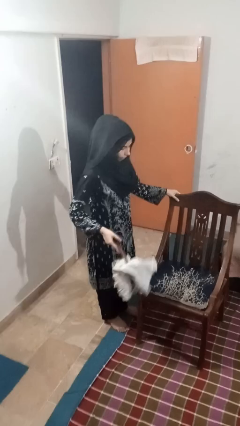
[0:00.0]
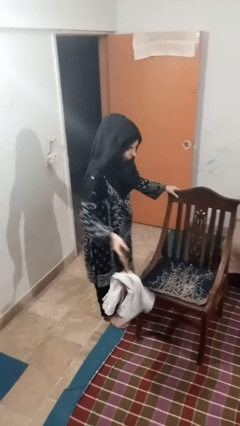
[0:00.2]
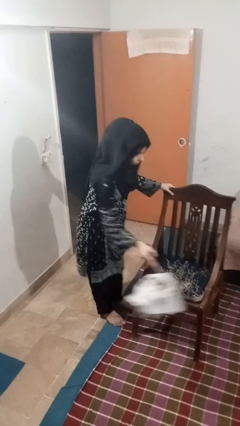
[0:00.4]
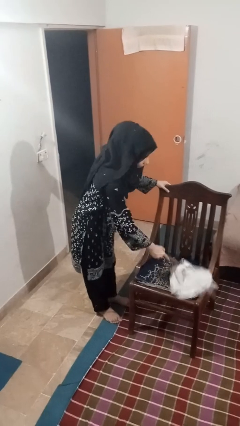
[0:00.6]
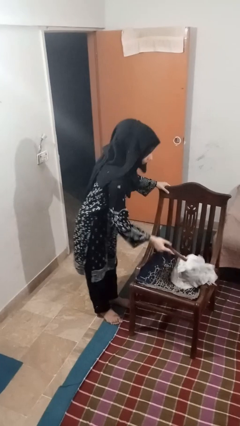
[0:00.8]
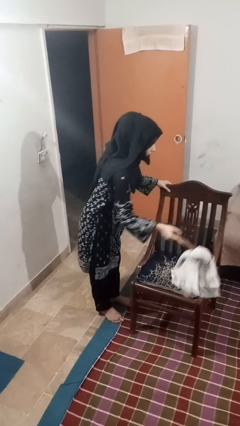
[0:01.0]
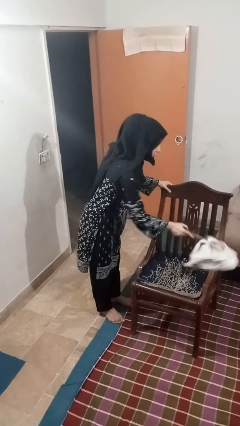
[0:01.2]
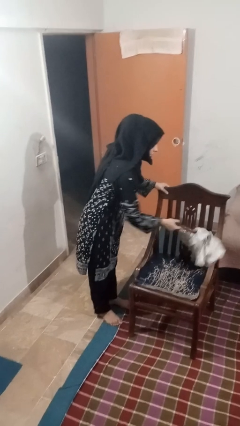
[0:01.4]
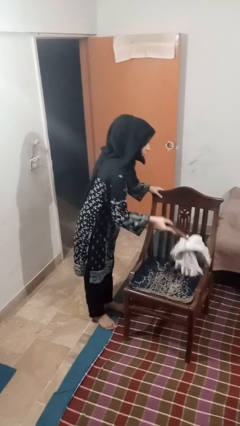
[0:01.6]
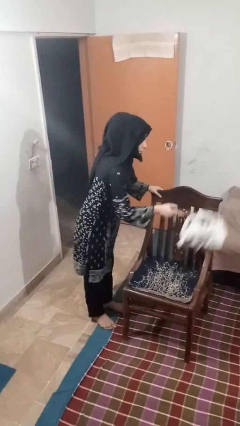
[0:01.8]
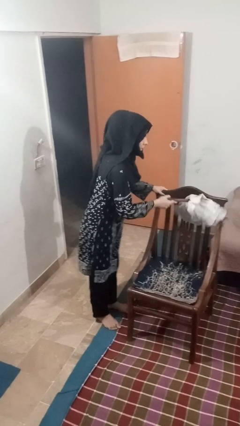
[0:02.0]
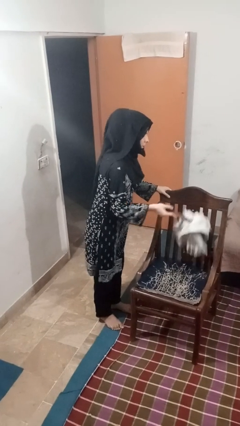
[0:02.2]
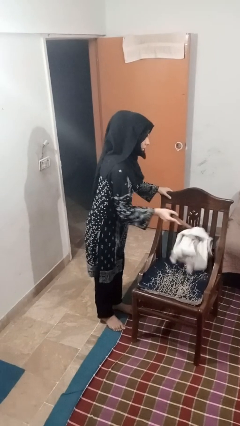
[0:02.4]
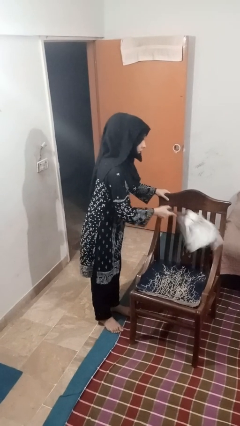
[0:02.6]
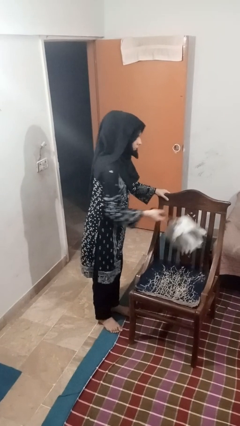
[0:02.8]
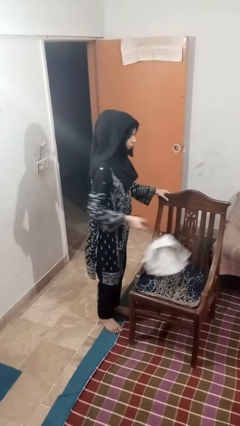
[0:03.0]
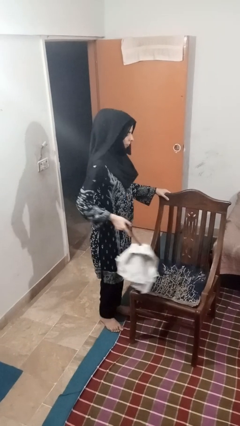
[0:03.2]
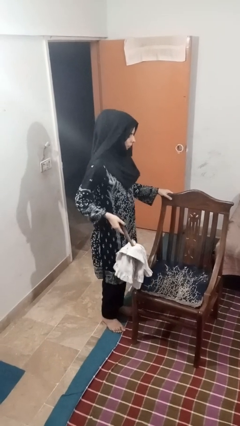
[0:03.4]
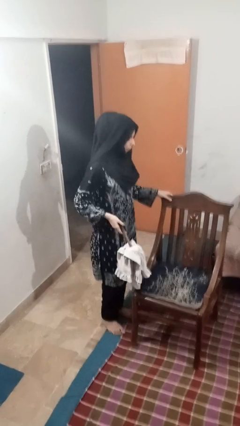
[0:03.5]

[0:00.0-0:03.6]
person dusts furniture

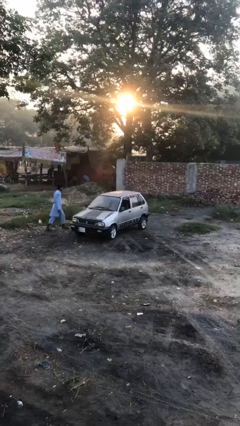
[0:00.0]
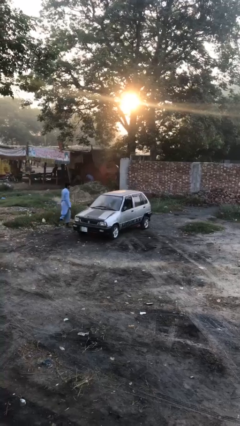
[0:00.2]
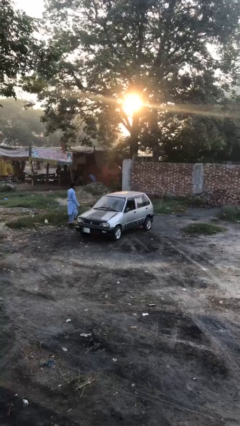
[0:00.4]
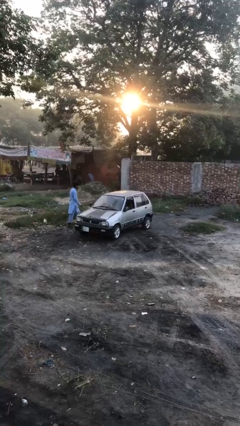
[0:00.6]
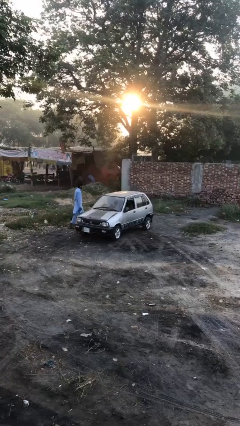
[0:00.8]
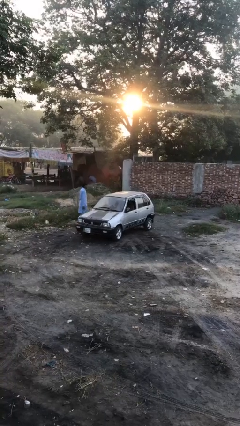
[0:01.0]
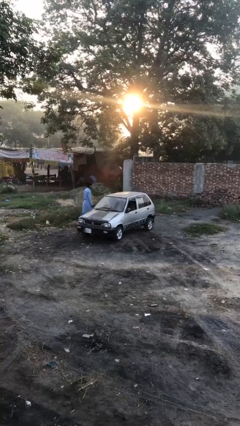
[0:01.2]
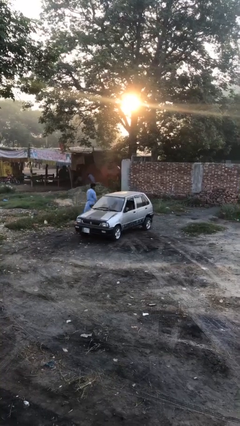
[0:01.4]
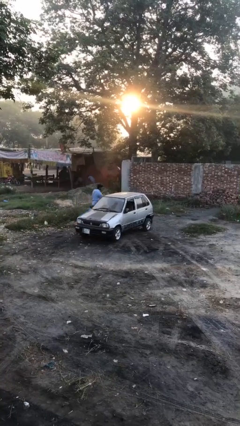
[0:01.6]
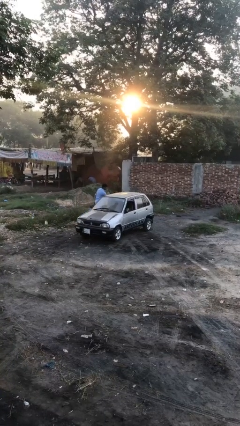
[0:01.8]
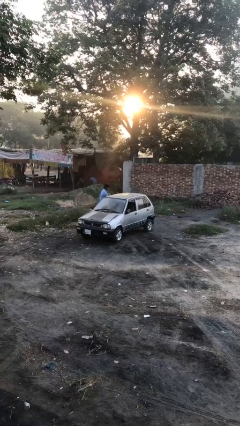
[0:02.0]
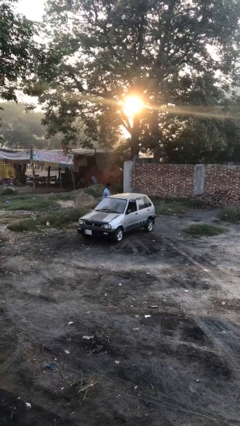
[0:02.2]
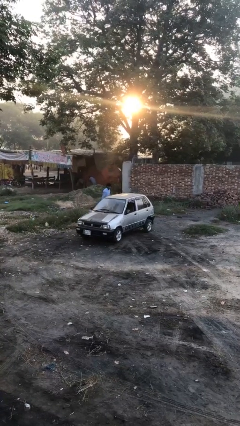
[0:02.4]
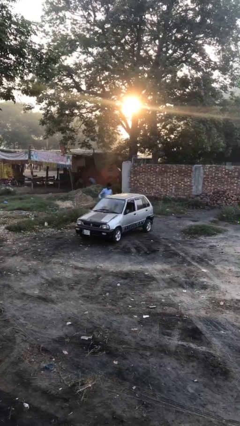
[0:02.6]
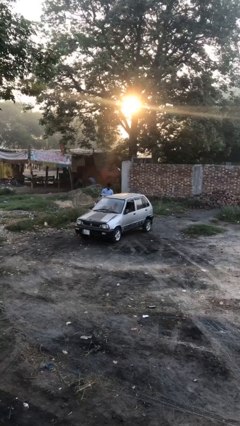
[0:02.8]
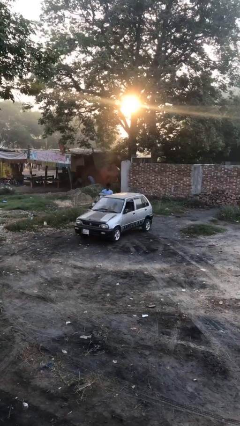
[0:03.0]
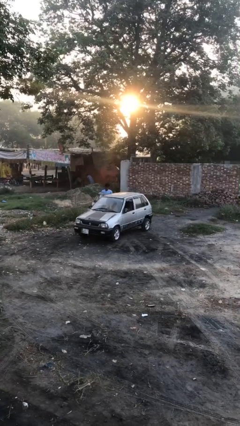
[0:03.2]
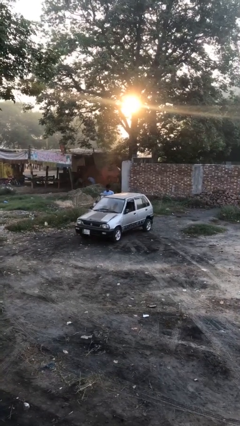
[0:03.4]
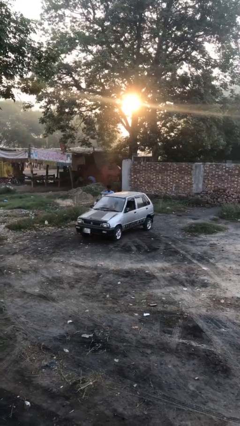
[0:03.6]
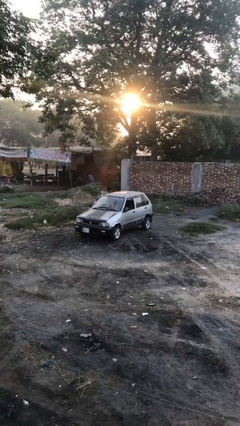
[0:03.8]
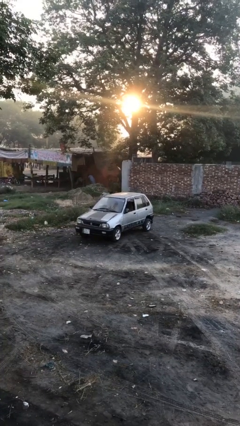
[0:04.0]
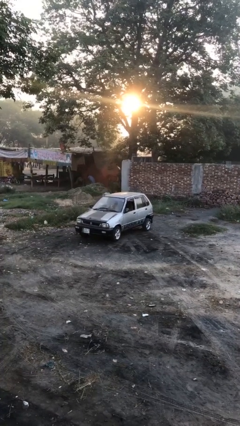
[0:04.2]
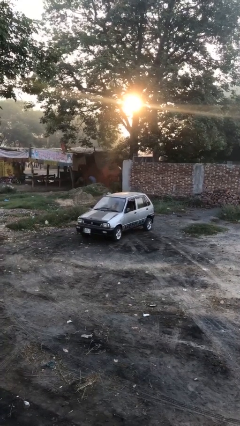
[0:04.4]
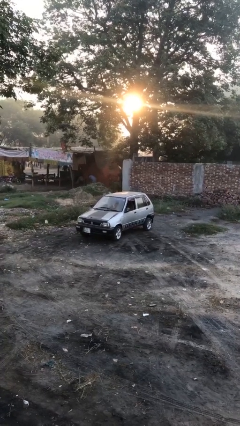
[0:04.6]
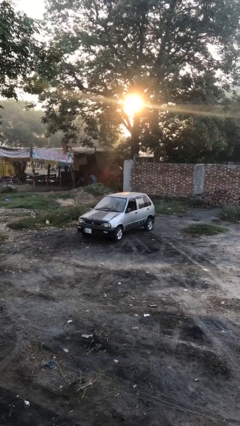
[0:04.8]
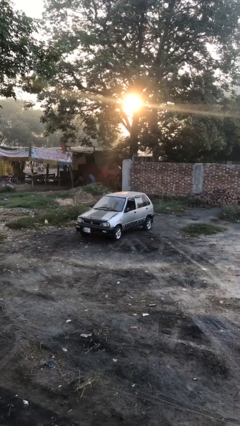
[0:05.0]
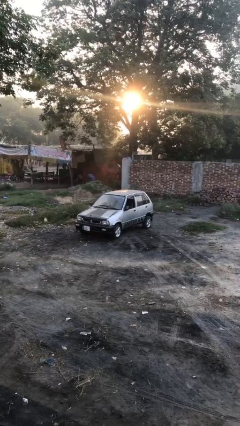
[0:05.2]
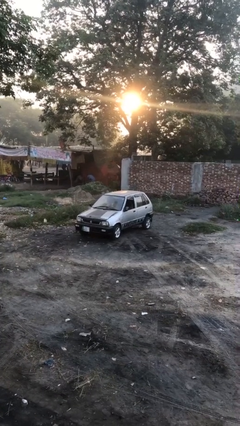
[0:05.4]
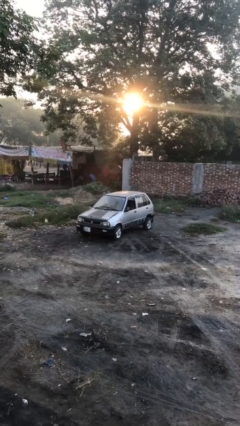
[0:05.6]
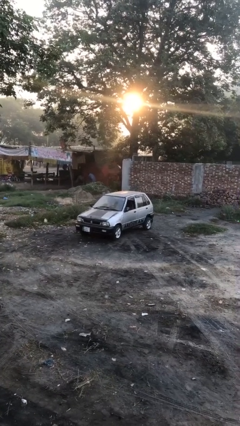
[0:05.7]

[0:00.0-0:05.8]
car picks up person

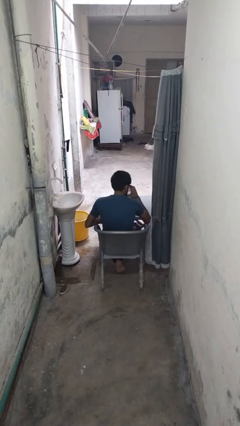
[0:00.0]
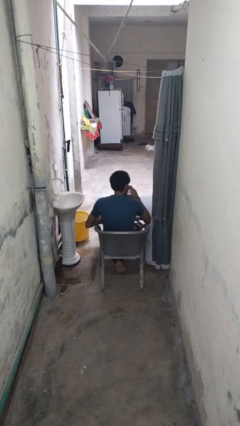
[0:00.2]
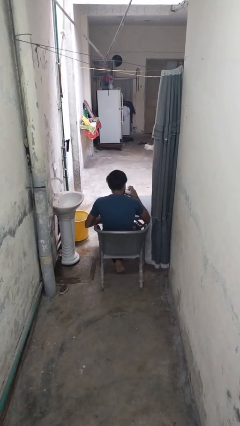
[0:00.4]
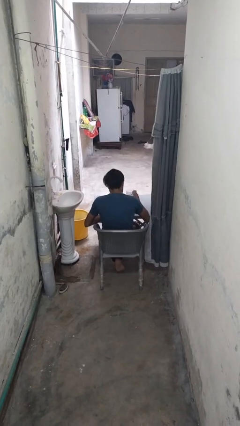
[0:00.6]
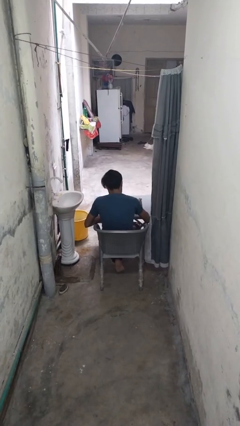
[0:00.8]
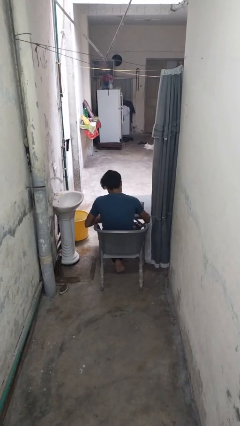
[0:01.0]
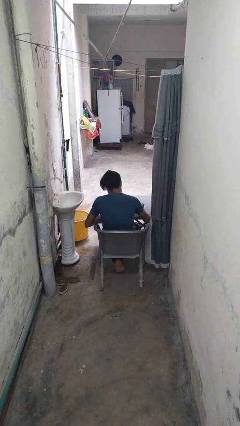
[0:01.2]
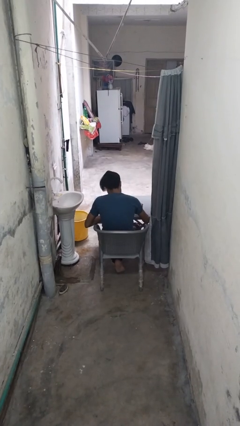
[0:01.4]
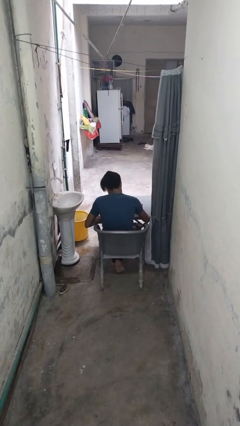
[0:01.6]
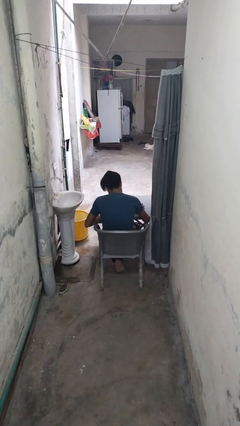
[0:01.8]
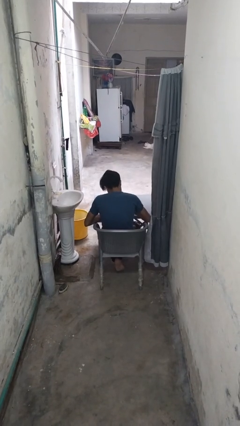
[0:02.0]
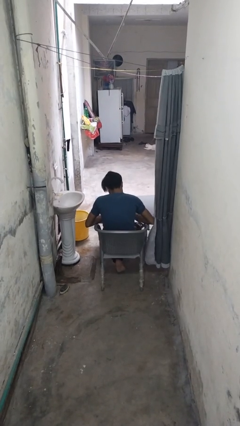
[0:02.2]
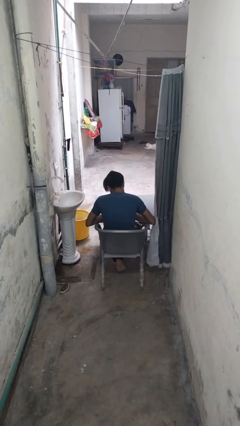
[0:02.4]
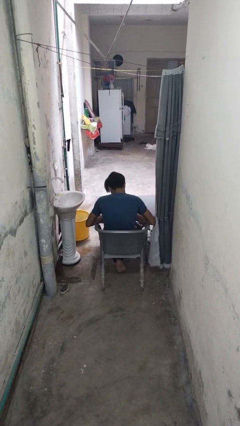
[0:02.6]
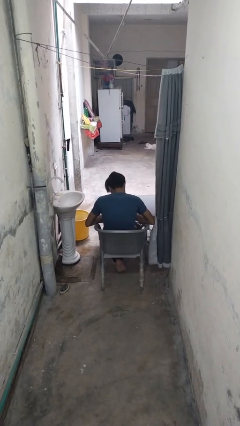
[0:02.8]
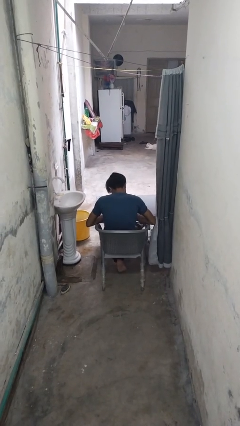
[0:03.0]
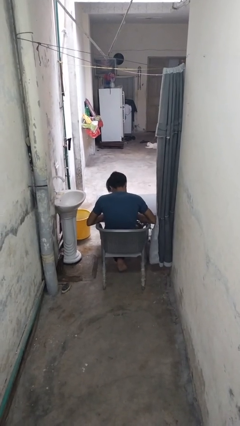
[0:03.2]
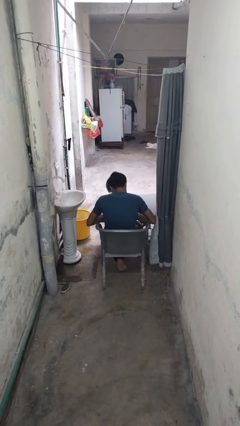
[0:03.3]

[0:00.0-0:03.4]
person puts down object on table

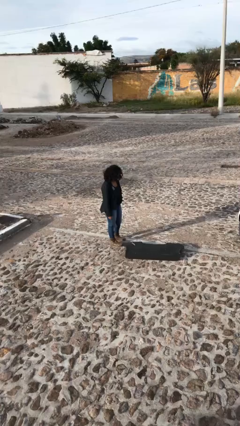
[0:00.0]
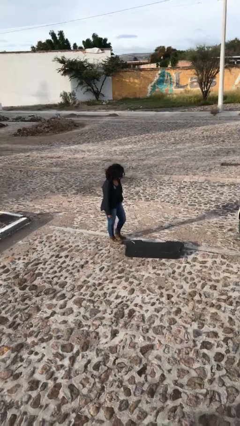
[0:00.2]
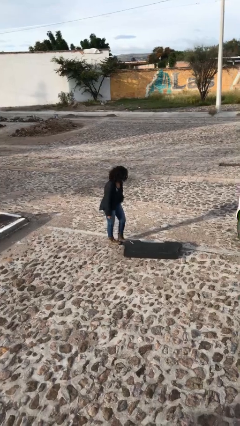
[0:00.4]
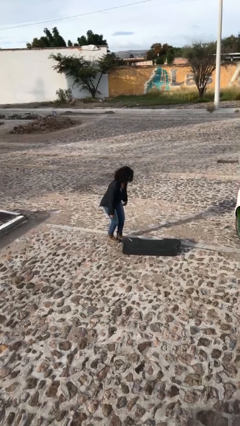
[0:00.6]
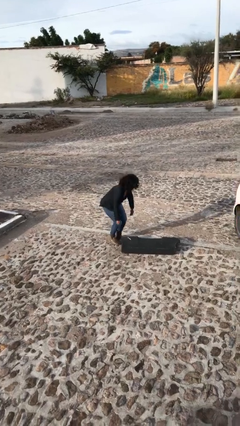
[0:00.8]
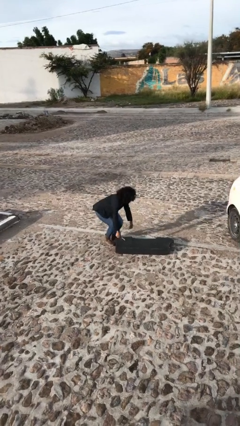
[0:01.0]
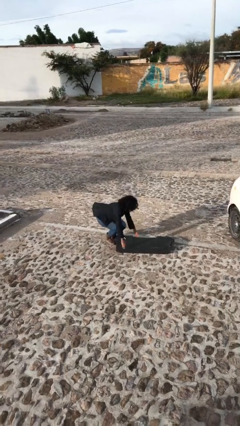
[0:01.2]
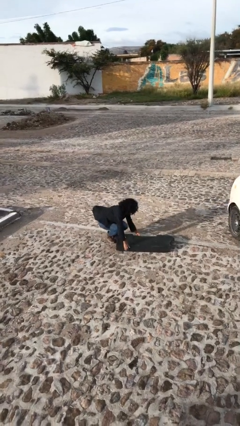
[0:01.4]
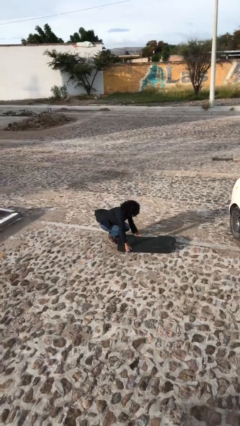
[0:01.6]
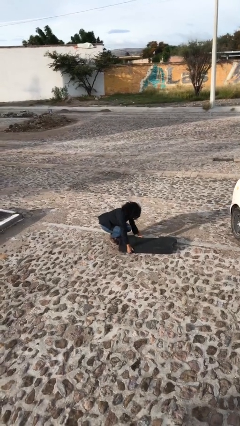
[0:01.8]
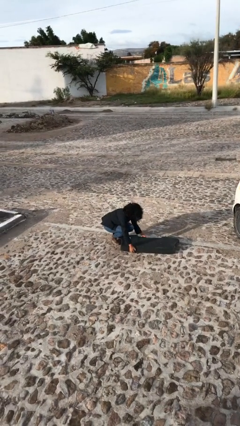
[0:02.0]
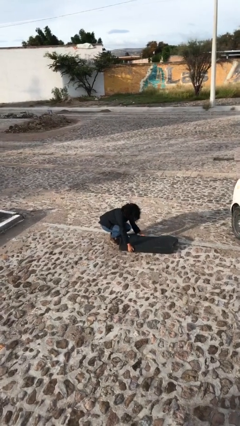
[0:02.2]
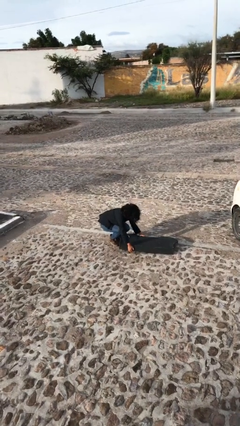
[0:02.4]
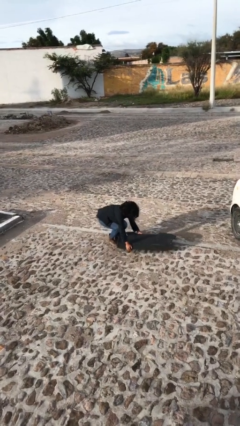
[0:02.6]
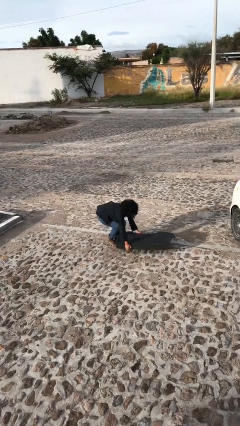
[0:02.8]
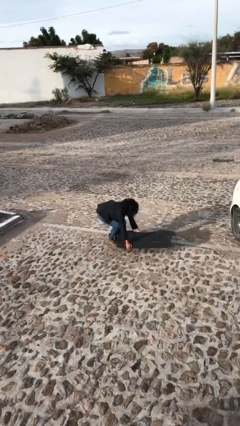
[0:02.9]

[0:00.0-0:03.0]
person picks up object from floor

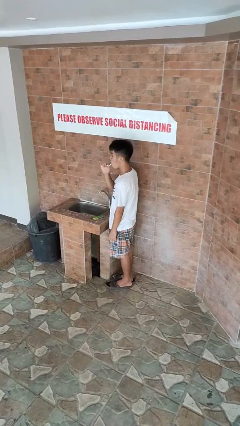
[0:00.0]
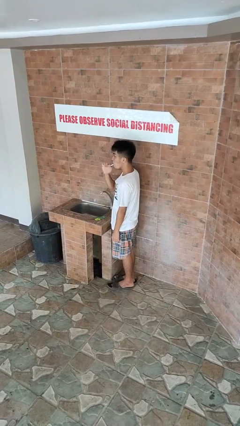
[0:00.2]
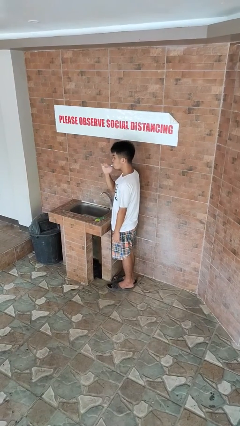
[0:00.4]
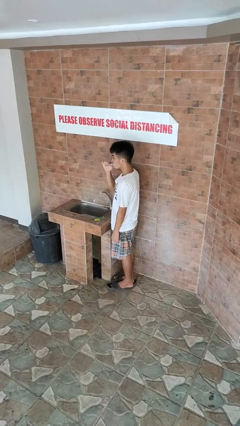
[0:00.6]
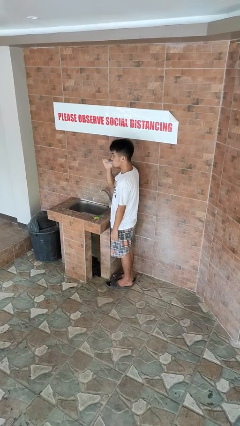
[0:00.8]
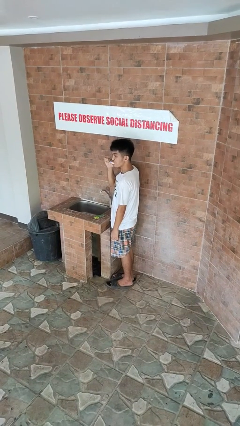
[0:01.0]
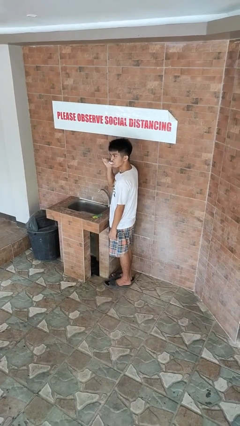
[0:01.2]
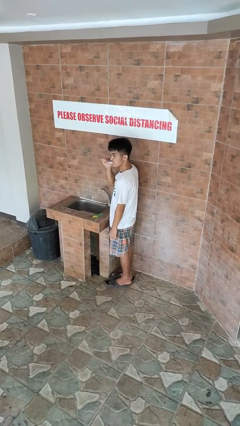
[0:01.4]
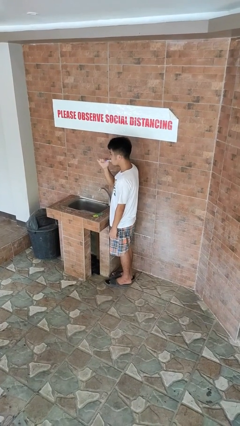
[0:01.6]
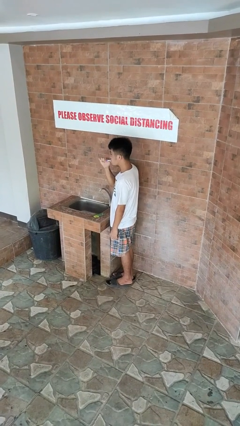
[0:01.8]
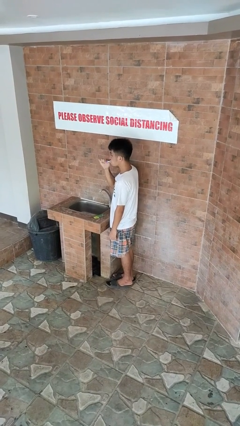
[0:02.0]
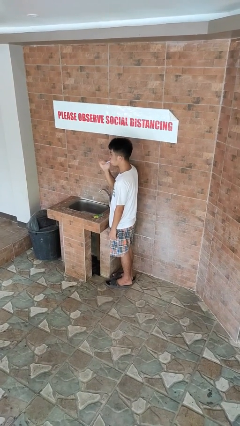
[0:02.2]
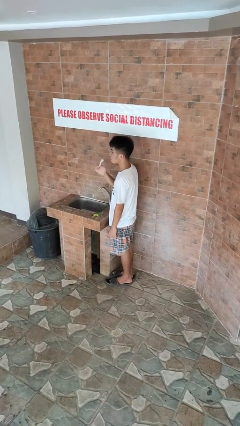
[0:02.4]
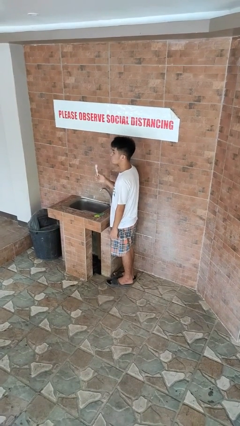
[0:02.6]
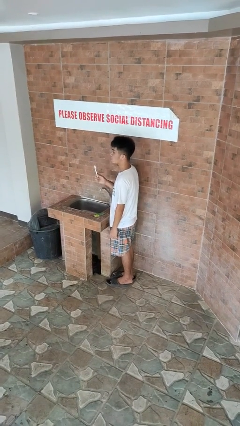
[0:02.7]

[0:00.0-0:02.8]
person brushes teeth
